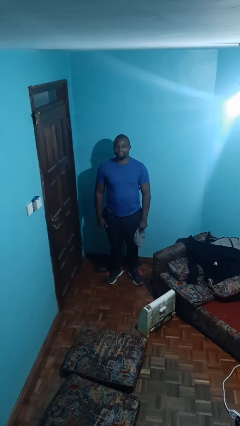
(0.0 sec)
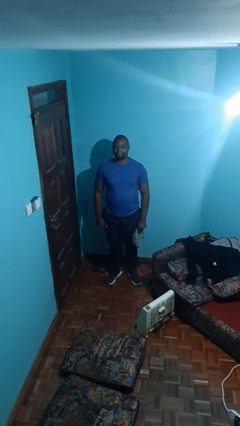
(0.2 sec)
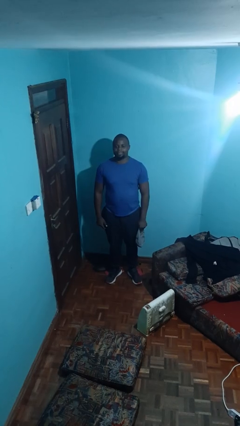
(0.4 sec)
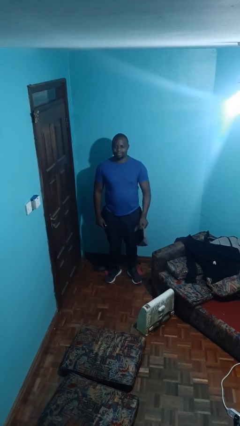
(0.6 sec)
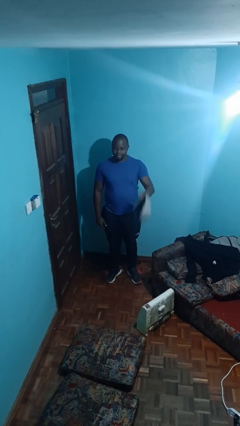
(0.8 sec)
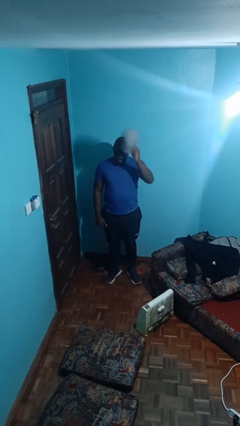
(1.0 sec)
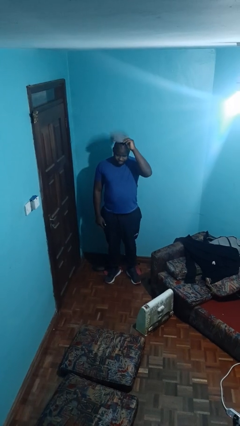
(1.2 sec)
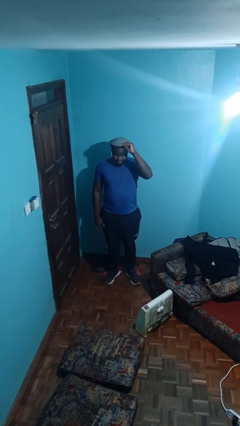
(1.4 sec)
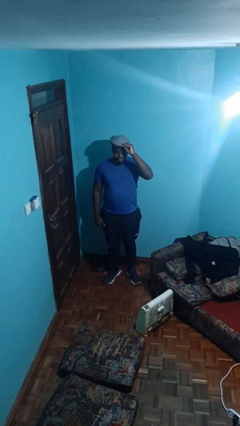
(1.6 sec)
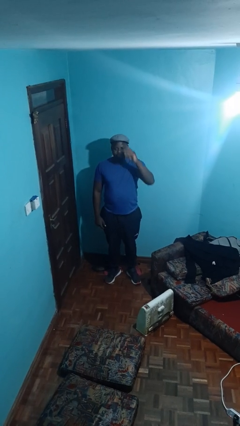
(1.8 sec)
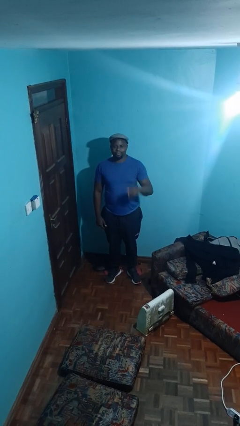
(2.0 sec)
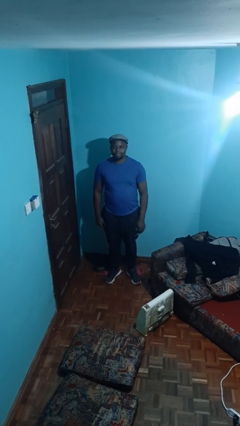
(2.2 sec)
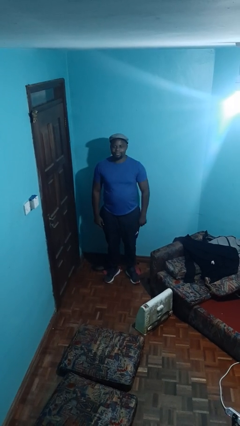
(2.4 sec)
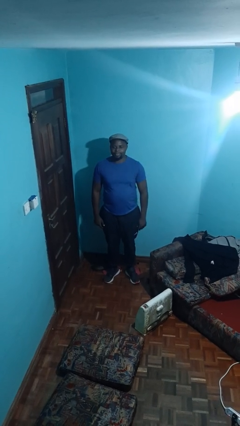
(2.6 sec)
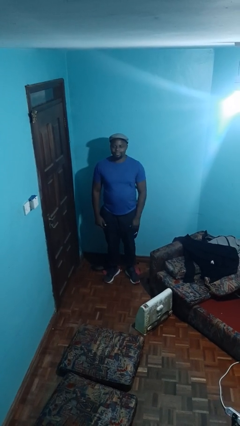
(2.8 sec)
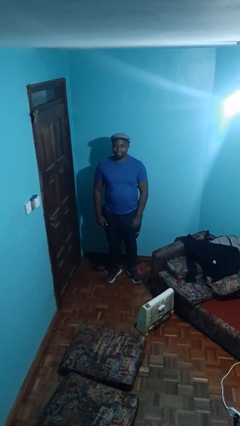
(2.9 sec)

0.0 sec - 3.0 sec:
person puts on hat

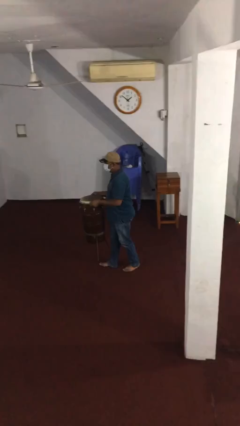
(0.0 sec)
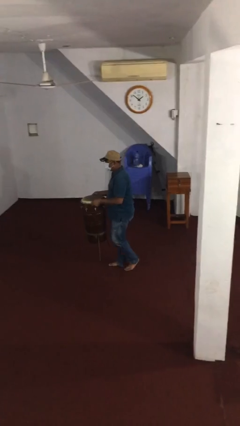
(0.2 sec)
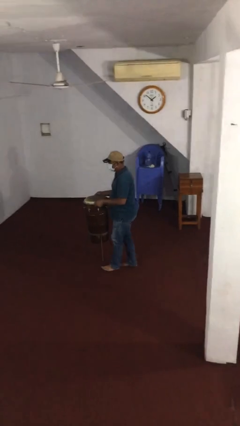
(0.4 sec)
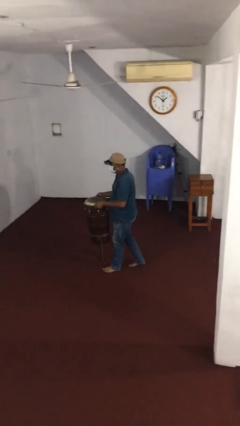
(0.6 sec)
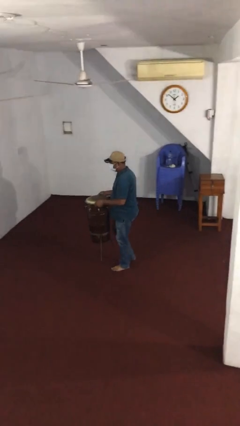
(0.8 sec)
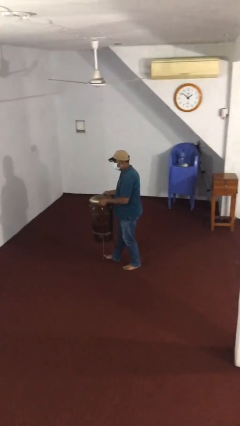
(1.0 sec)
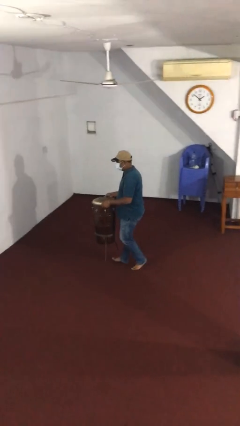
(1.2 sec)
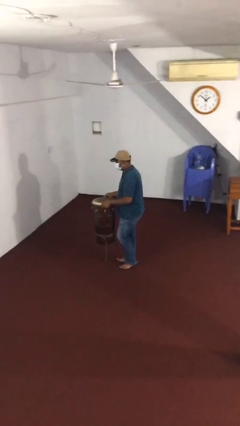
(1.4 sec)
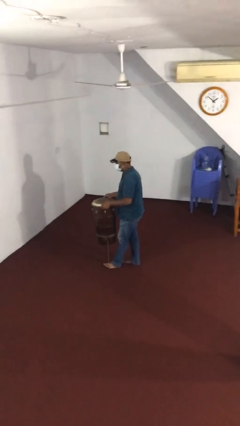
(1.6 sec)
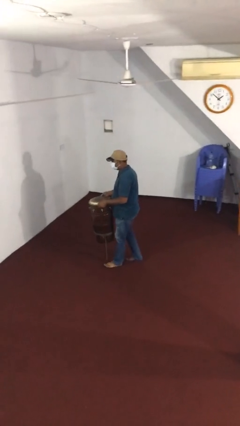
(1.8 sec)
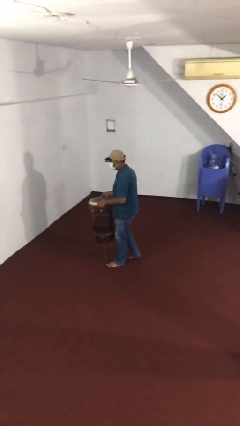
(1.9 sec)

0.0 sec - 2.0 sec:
person carries heavy object

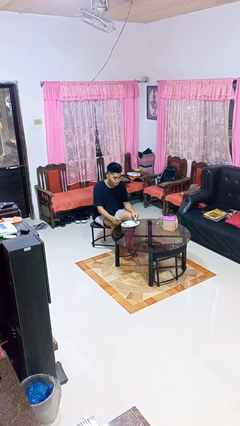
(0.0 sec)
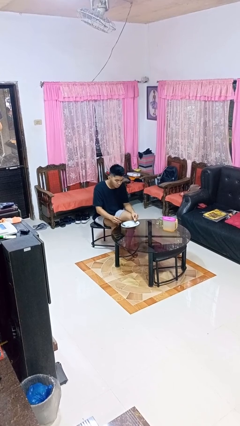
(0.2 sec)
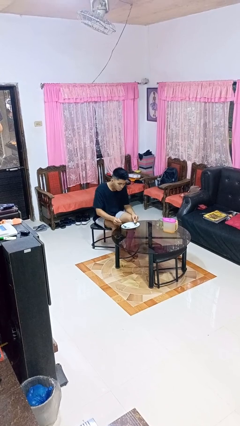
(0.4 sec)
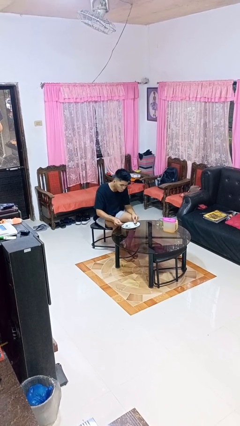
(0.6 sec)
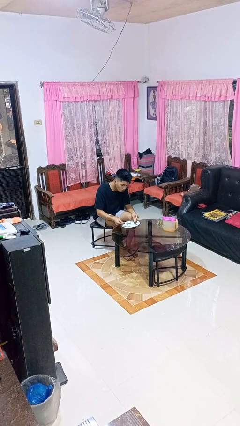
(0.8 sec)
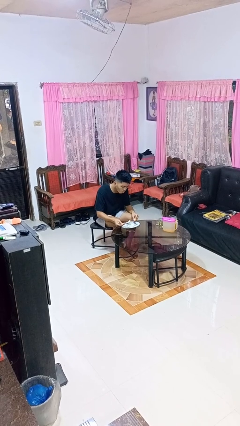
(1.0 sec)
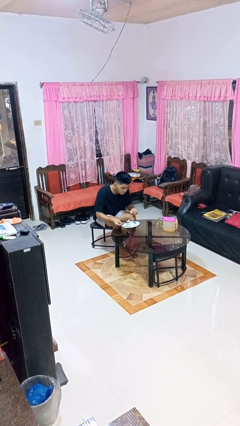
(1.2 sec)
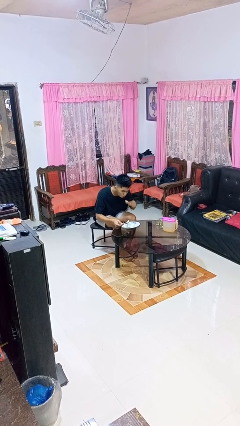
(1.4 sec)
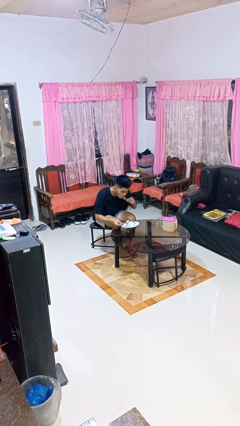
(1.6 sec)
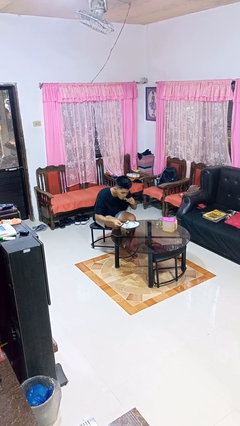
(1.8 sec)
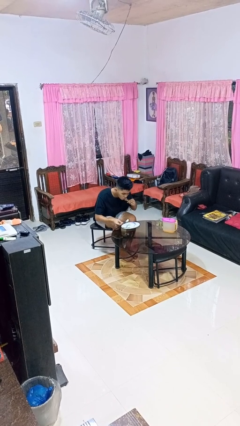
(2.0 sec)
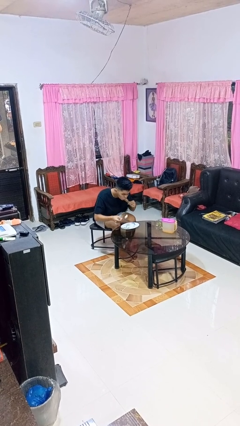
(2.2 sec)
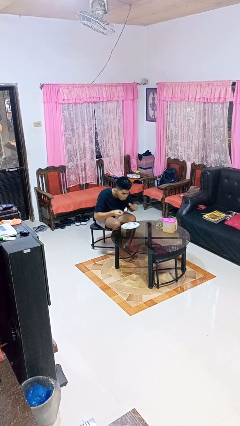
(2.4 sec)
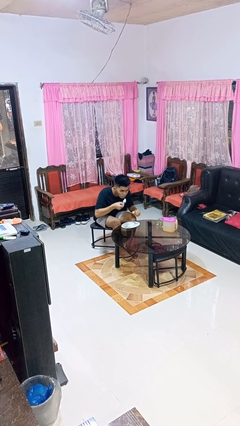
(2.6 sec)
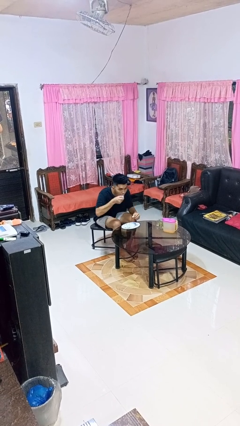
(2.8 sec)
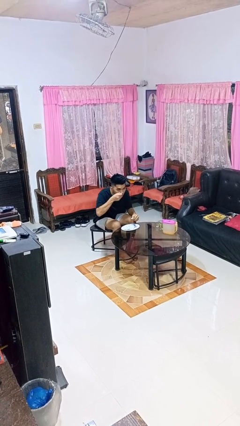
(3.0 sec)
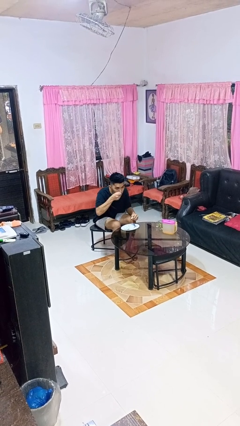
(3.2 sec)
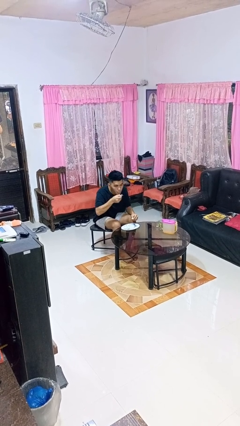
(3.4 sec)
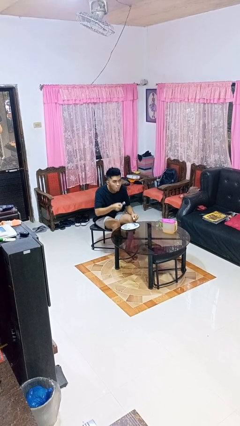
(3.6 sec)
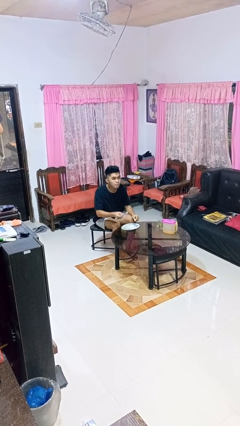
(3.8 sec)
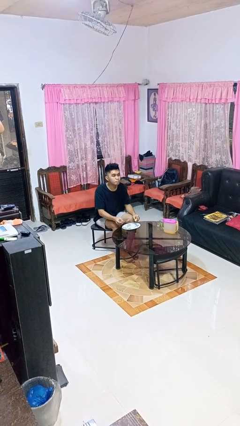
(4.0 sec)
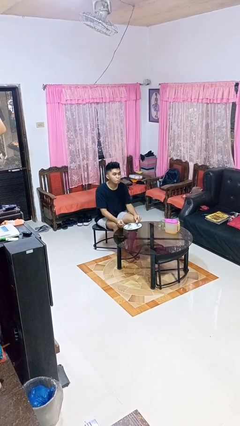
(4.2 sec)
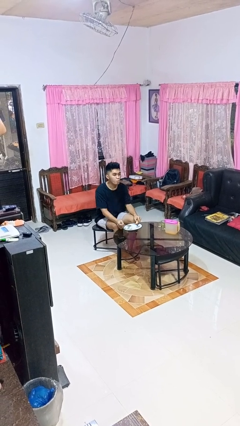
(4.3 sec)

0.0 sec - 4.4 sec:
person eats with utensil

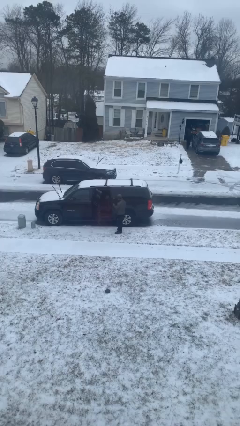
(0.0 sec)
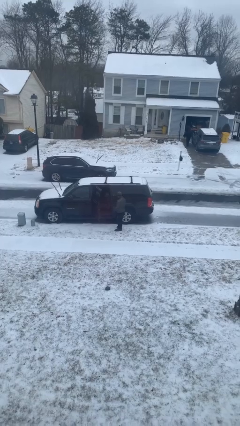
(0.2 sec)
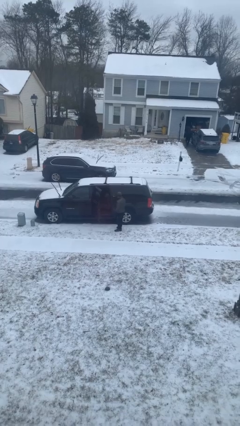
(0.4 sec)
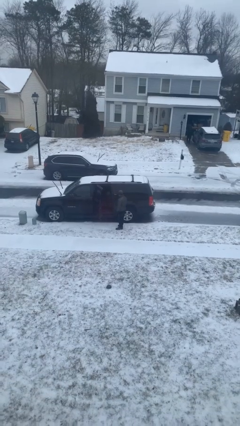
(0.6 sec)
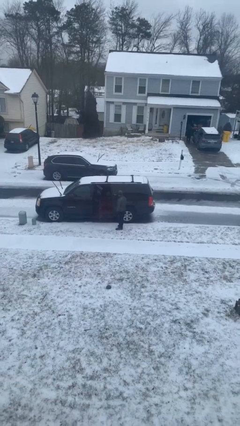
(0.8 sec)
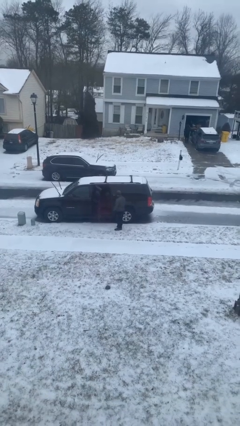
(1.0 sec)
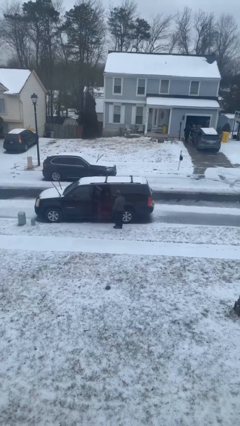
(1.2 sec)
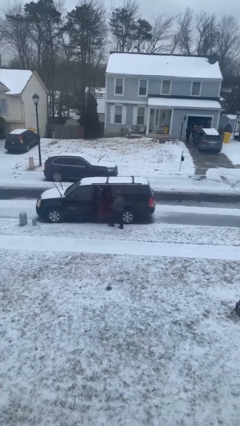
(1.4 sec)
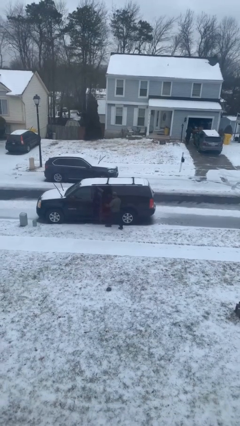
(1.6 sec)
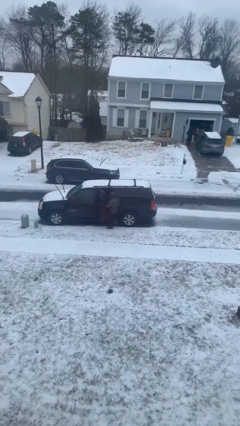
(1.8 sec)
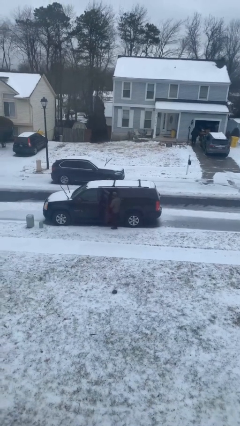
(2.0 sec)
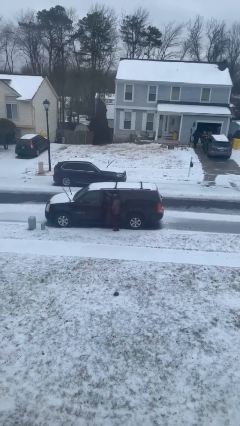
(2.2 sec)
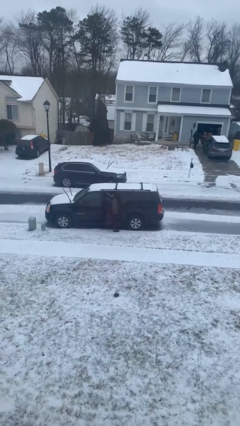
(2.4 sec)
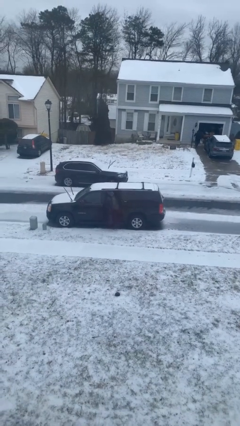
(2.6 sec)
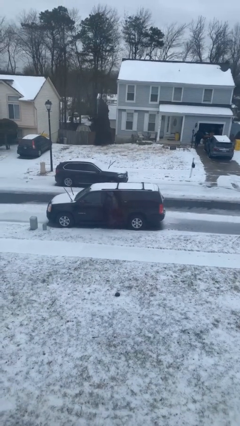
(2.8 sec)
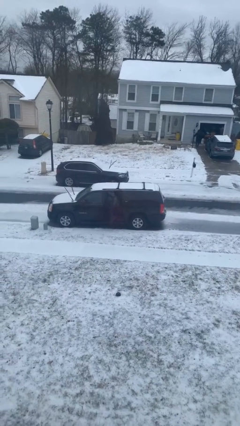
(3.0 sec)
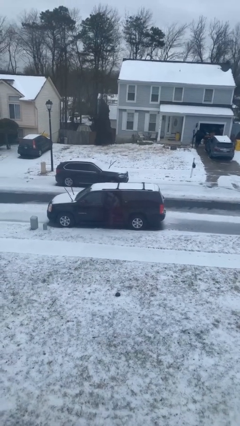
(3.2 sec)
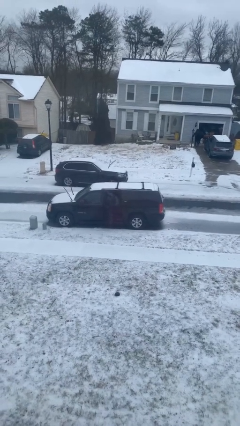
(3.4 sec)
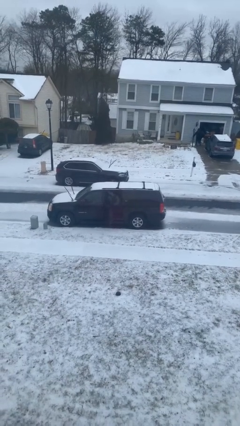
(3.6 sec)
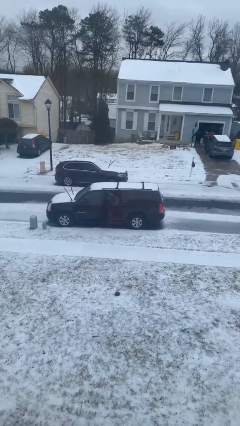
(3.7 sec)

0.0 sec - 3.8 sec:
person enters car

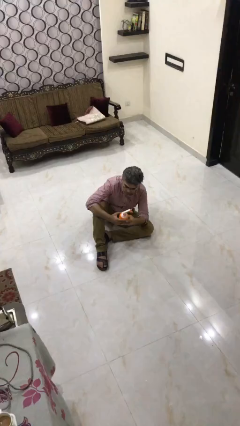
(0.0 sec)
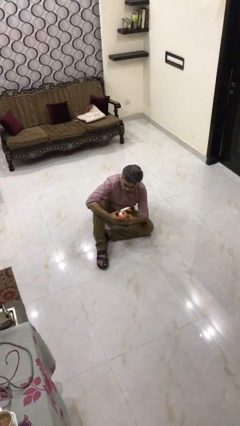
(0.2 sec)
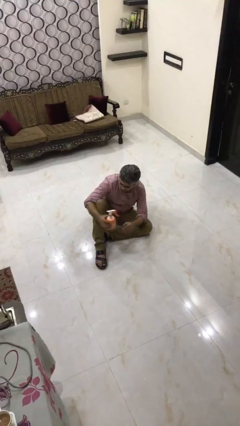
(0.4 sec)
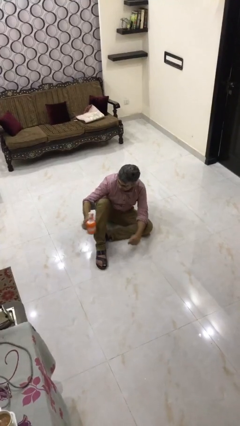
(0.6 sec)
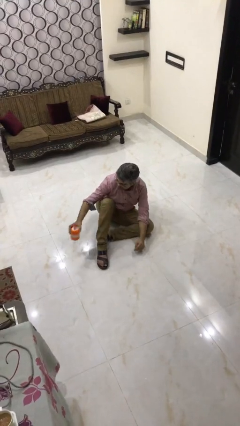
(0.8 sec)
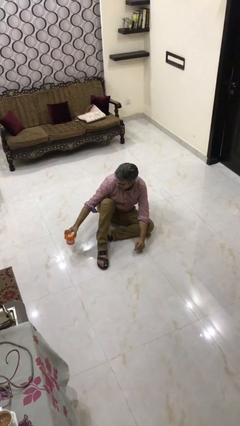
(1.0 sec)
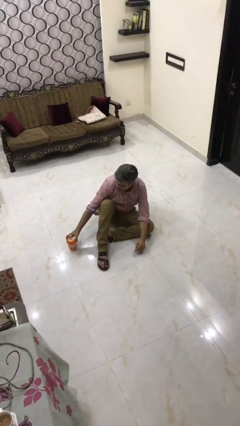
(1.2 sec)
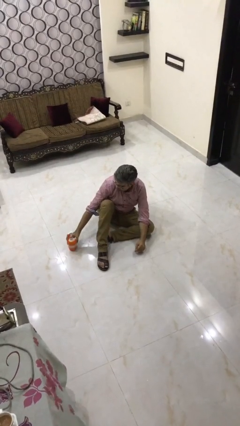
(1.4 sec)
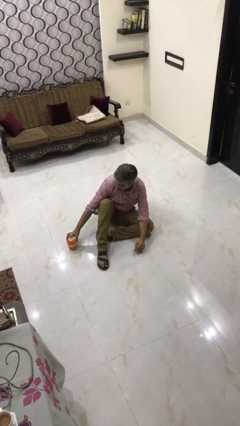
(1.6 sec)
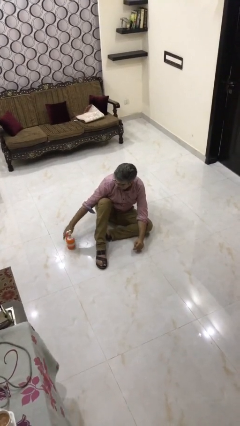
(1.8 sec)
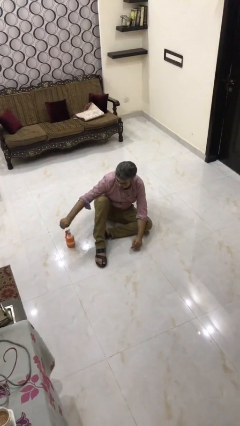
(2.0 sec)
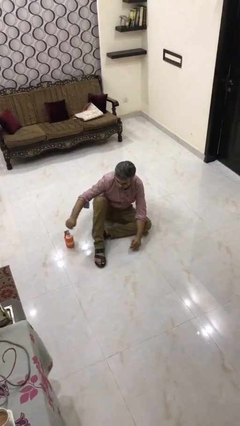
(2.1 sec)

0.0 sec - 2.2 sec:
person puts down object on floor

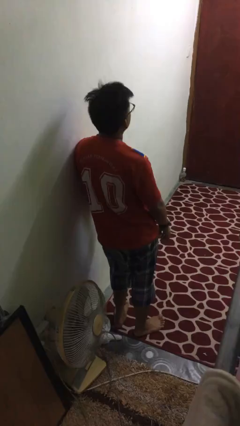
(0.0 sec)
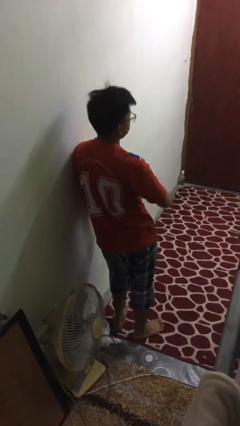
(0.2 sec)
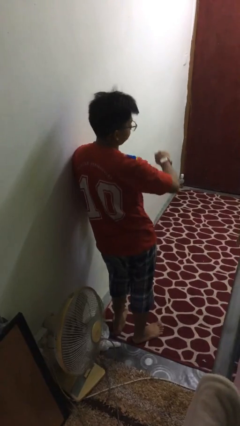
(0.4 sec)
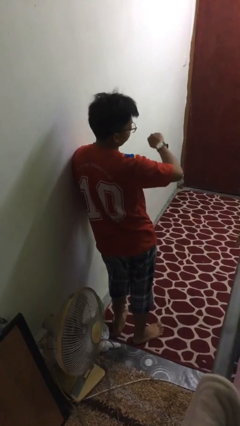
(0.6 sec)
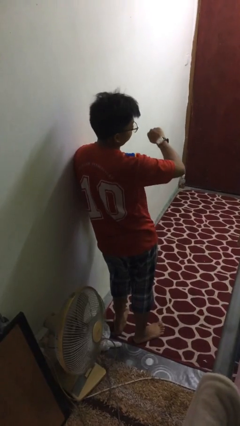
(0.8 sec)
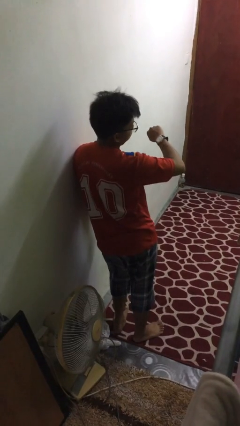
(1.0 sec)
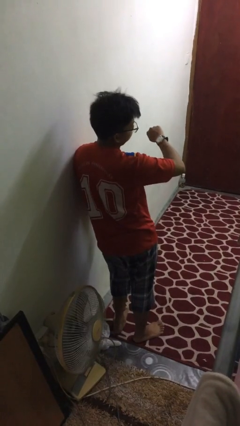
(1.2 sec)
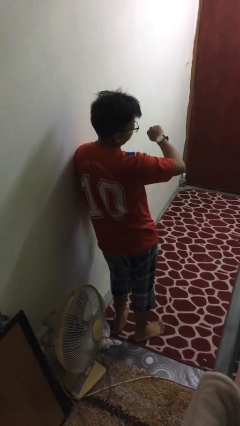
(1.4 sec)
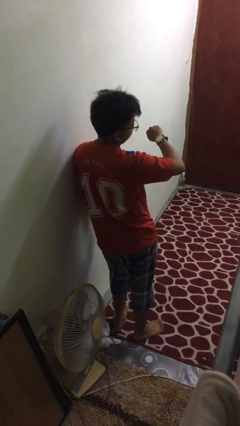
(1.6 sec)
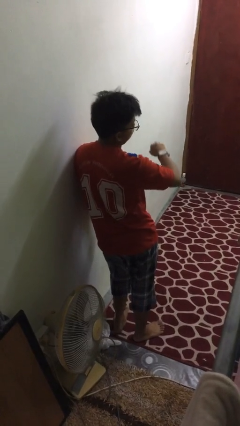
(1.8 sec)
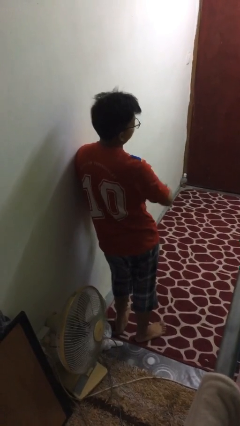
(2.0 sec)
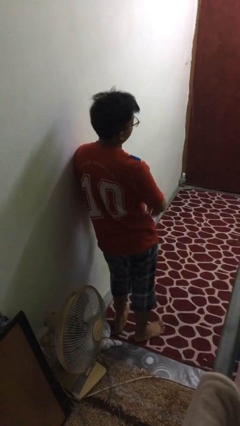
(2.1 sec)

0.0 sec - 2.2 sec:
person looks at wristwatch
